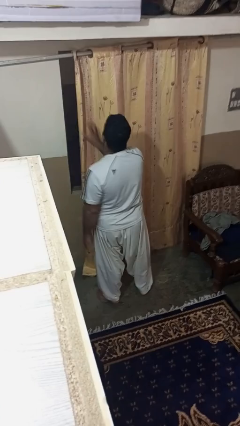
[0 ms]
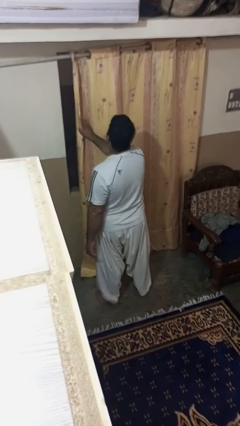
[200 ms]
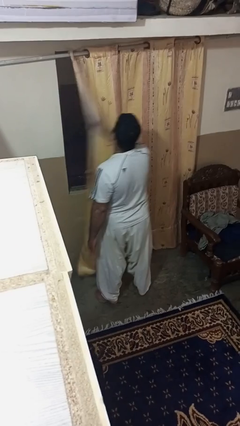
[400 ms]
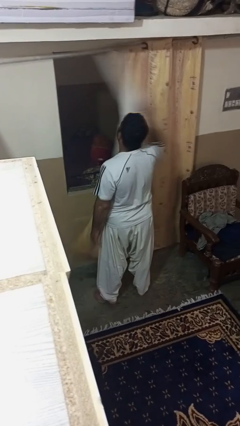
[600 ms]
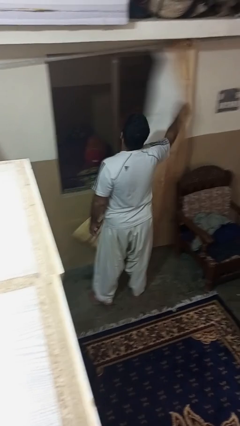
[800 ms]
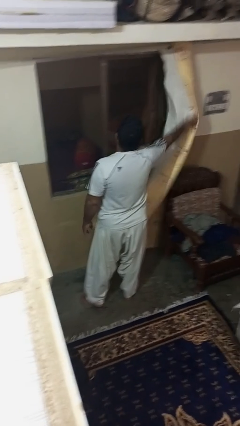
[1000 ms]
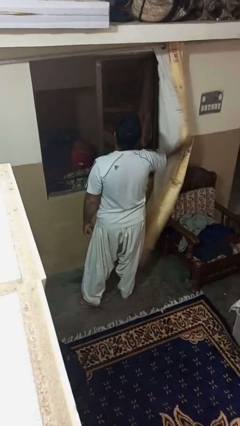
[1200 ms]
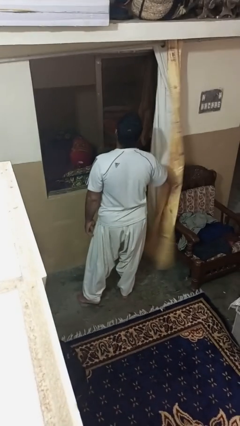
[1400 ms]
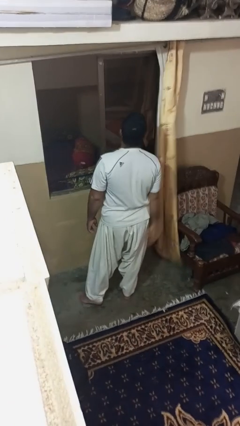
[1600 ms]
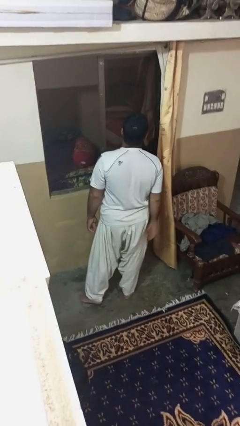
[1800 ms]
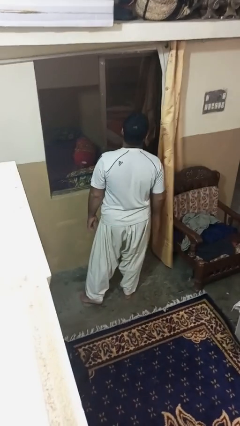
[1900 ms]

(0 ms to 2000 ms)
person opens curtains

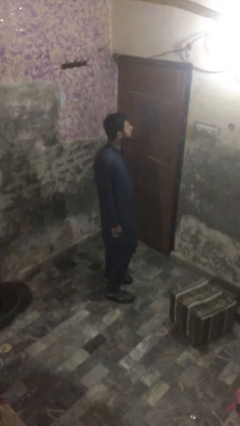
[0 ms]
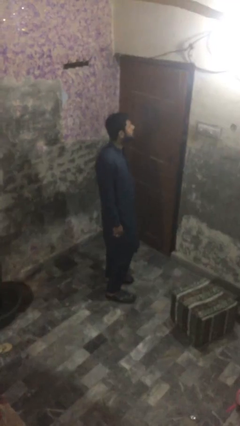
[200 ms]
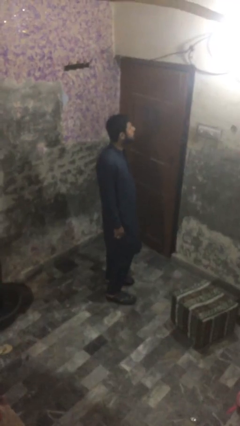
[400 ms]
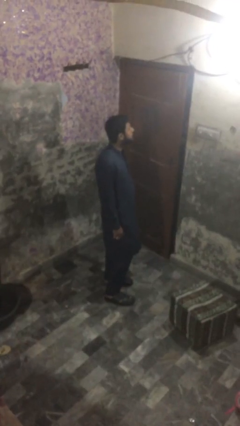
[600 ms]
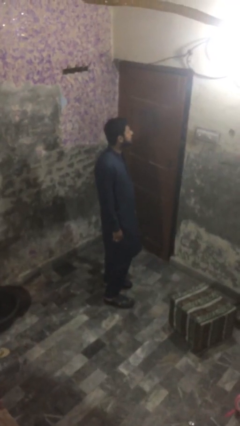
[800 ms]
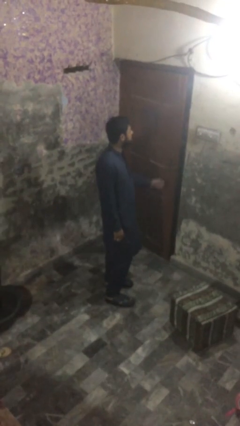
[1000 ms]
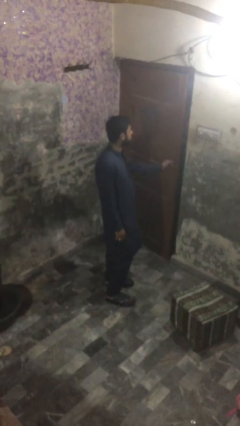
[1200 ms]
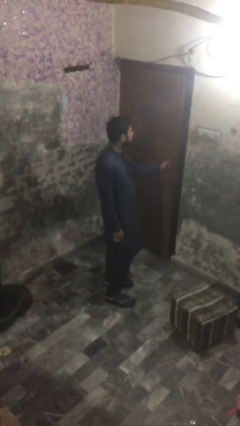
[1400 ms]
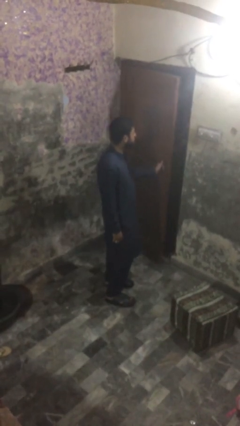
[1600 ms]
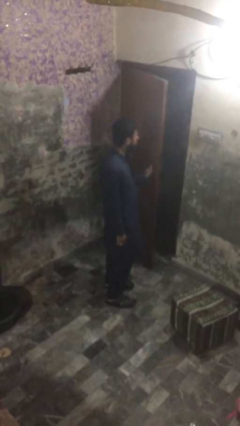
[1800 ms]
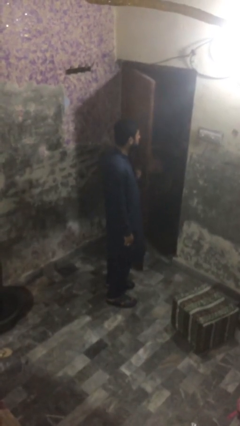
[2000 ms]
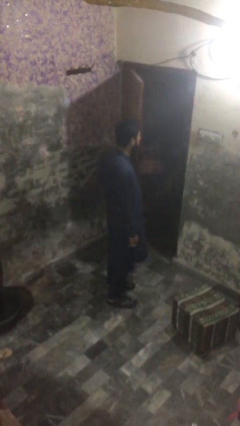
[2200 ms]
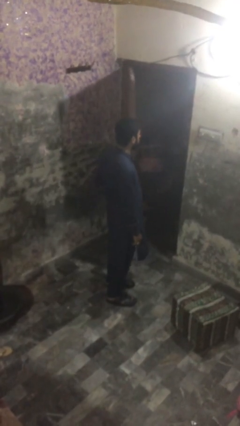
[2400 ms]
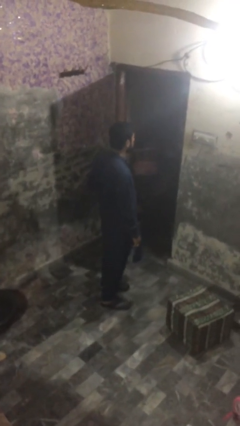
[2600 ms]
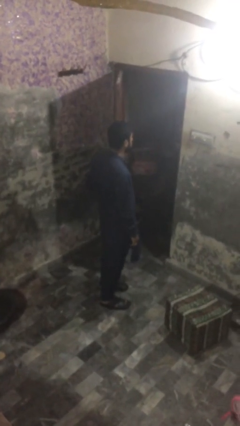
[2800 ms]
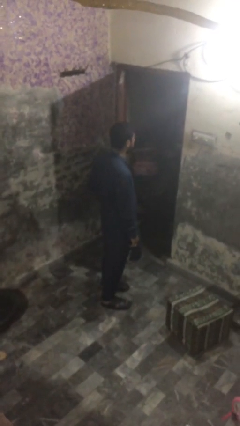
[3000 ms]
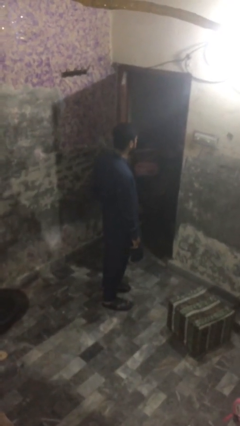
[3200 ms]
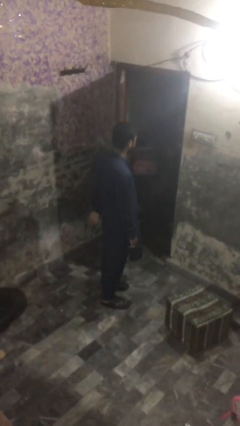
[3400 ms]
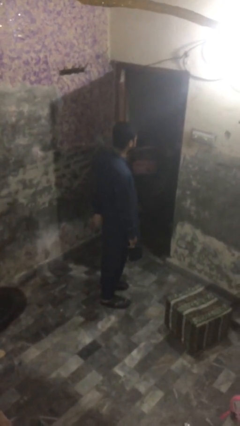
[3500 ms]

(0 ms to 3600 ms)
person opens facility door

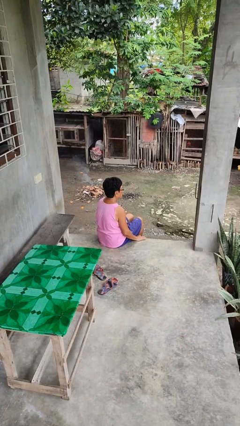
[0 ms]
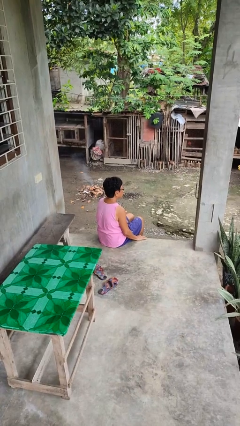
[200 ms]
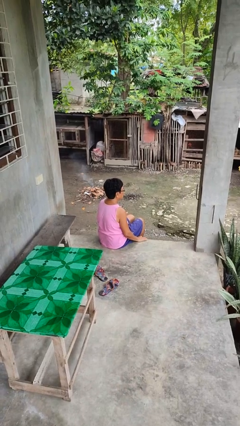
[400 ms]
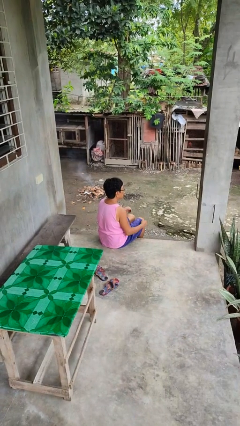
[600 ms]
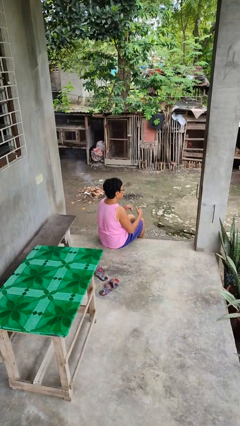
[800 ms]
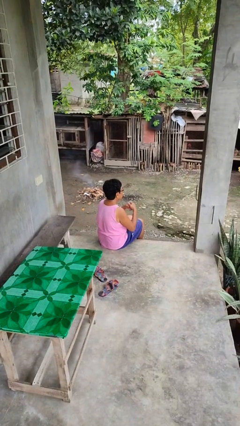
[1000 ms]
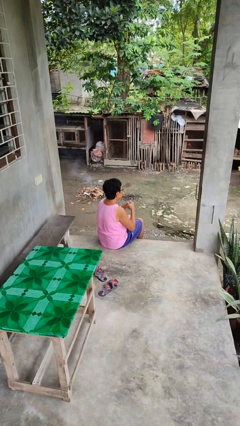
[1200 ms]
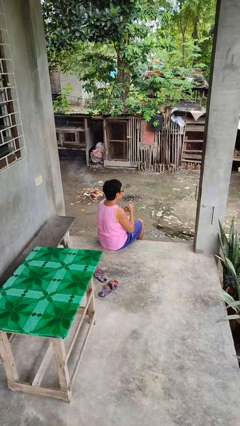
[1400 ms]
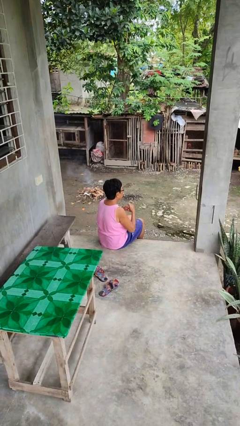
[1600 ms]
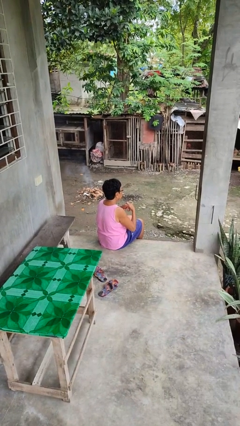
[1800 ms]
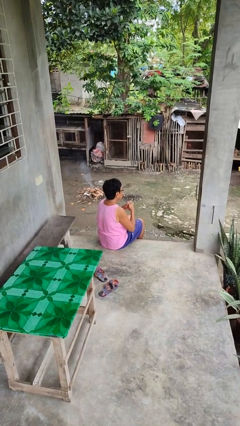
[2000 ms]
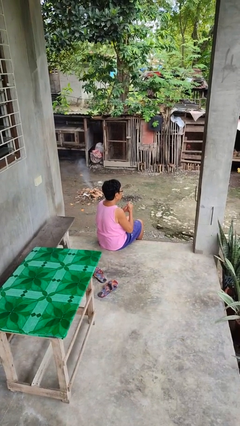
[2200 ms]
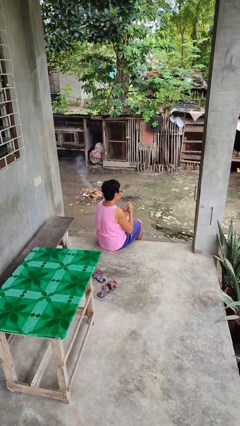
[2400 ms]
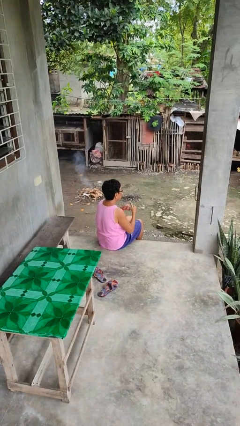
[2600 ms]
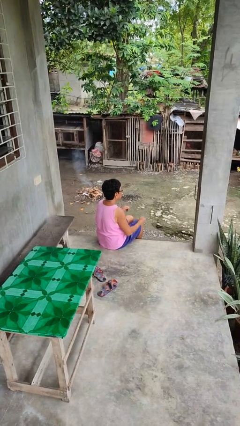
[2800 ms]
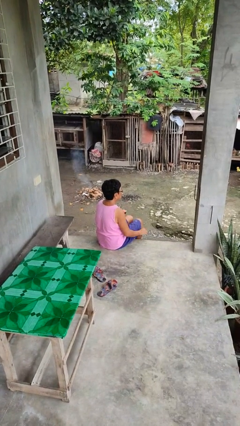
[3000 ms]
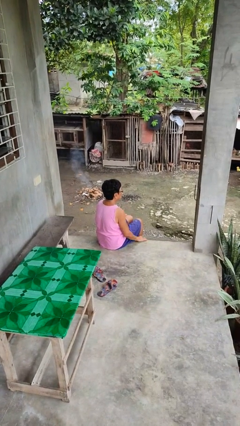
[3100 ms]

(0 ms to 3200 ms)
person cracks knuckles

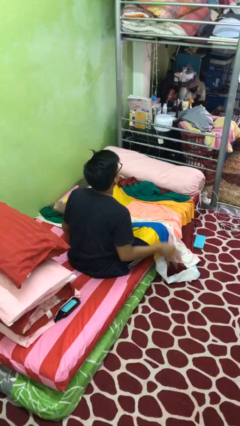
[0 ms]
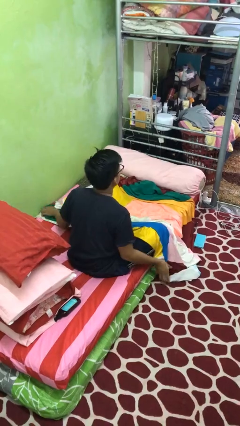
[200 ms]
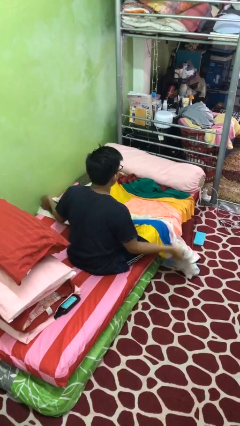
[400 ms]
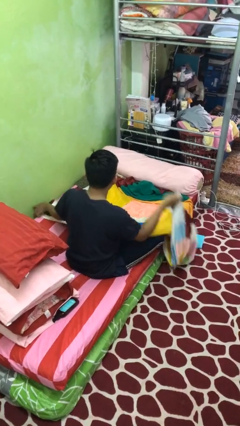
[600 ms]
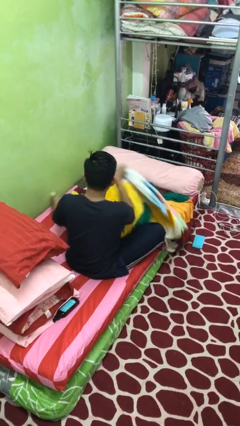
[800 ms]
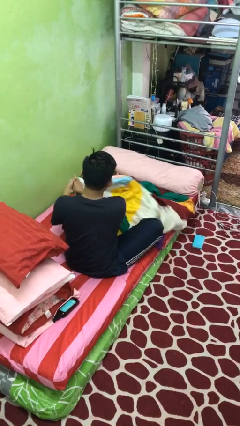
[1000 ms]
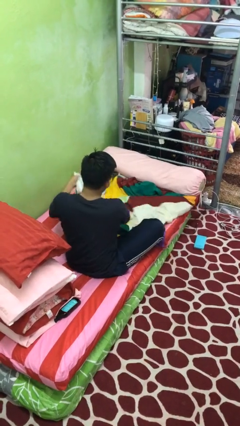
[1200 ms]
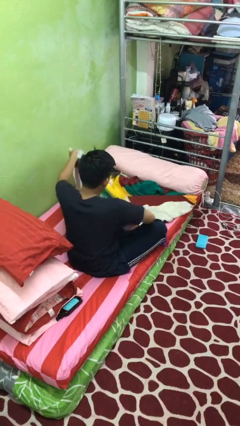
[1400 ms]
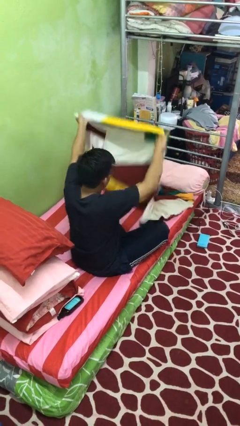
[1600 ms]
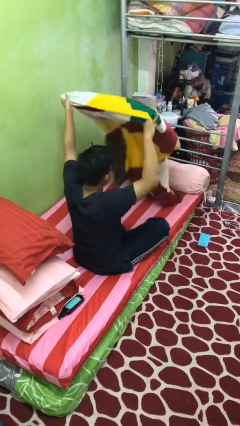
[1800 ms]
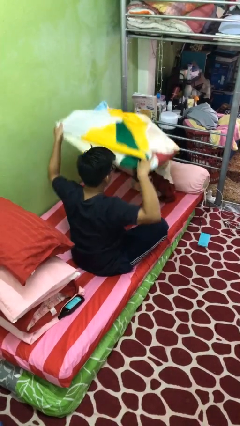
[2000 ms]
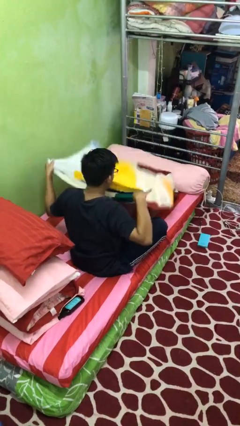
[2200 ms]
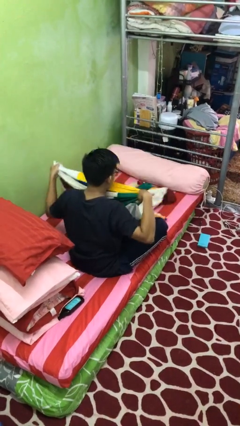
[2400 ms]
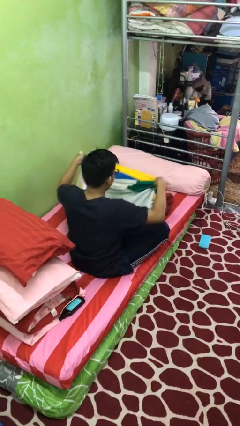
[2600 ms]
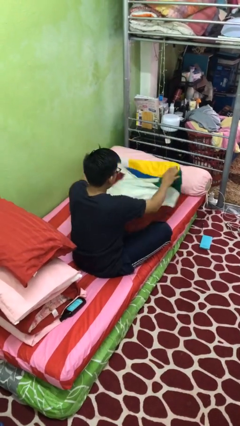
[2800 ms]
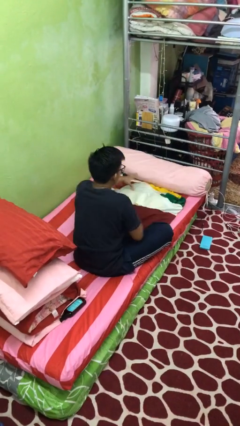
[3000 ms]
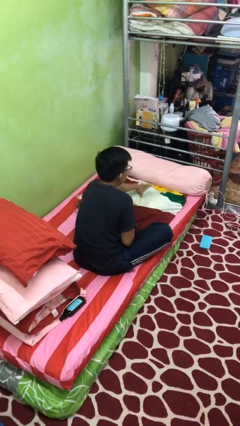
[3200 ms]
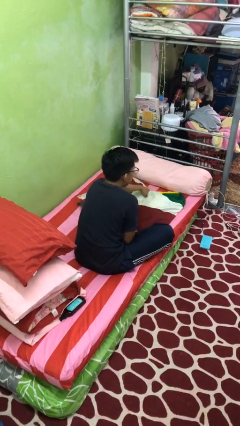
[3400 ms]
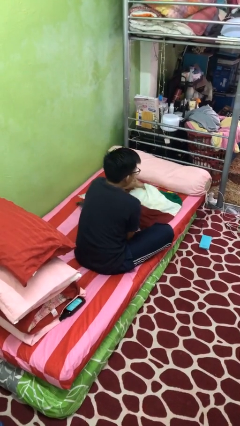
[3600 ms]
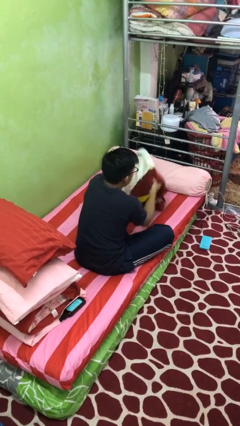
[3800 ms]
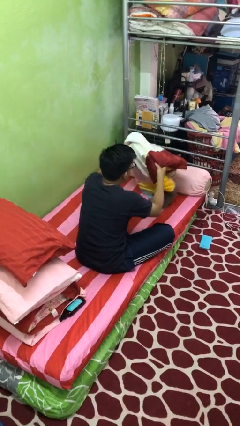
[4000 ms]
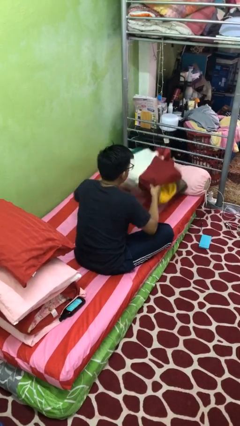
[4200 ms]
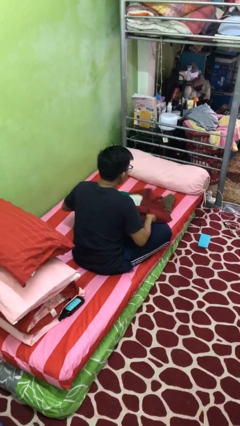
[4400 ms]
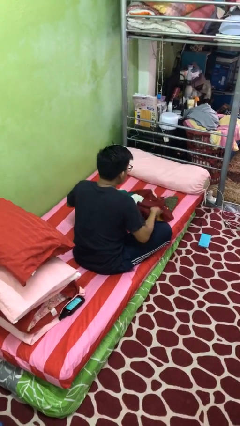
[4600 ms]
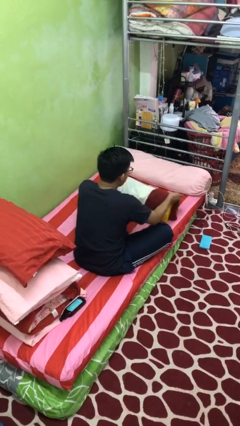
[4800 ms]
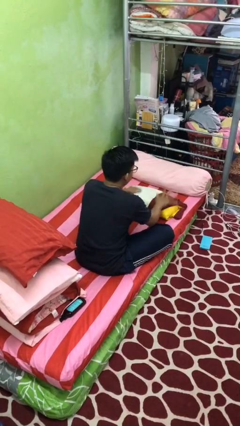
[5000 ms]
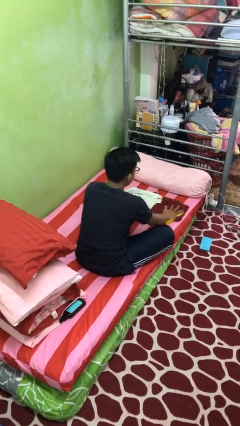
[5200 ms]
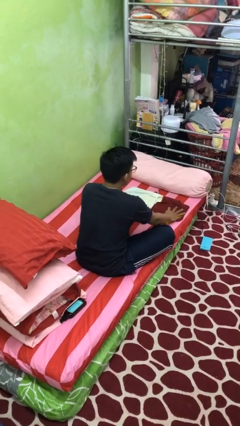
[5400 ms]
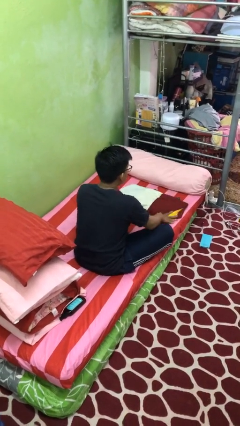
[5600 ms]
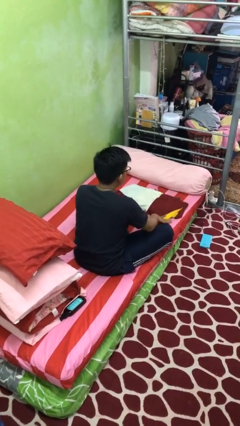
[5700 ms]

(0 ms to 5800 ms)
person folds blanket

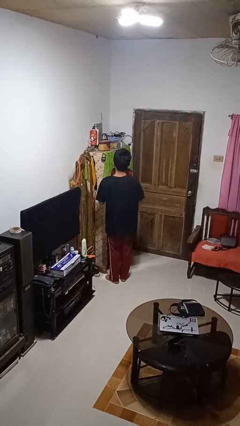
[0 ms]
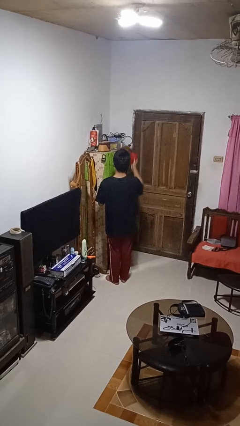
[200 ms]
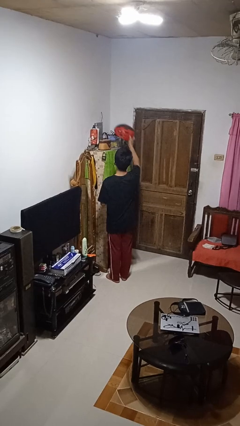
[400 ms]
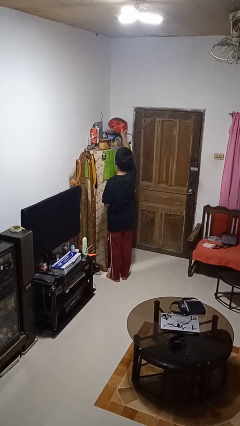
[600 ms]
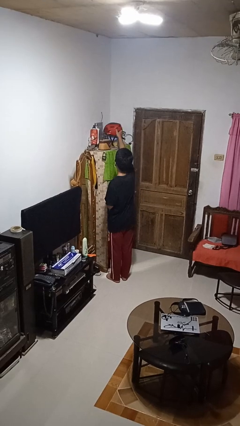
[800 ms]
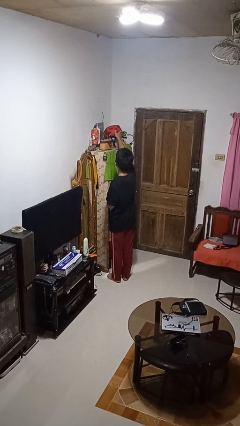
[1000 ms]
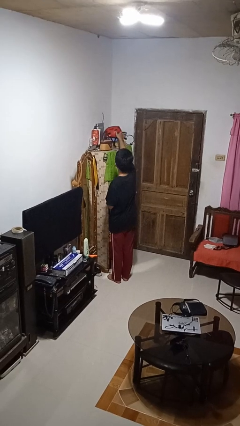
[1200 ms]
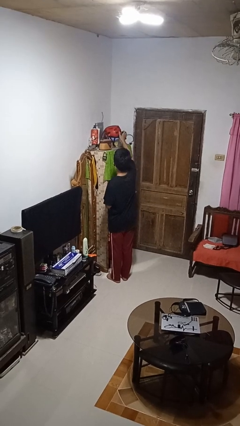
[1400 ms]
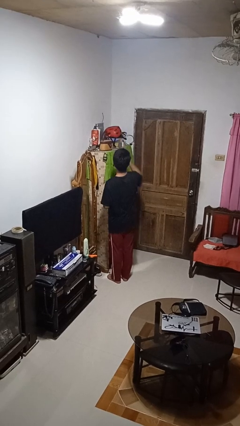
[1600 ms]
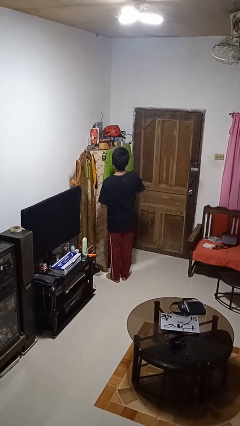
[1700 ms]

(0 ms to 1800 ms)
person puts down object on shelf

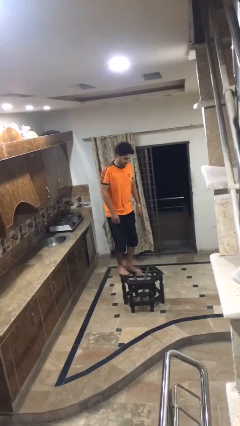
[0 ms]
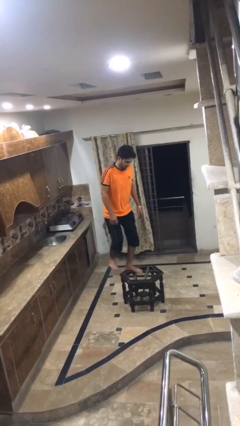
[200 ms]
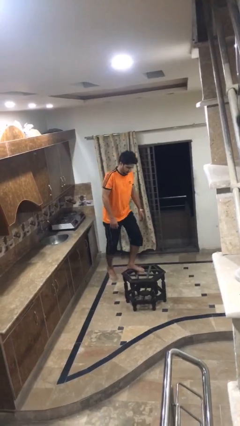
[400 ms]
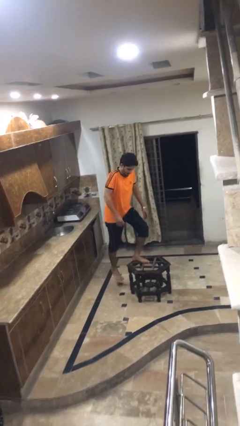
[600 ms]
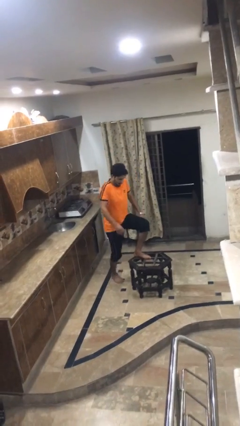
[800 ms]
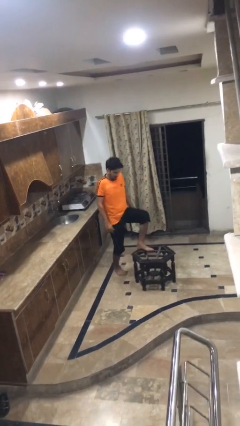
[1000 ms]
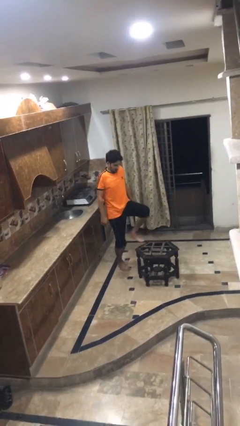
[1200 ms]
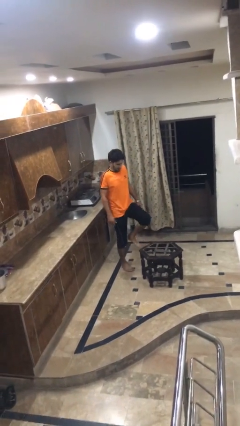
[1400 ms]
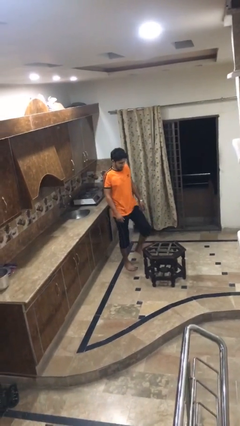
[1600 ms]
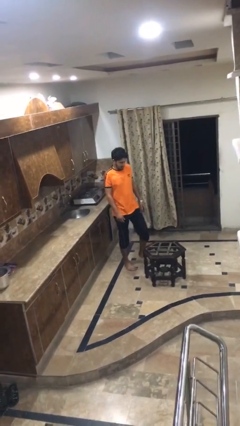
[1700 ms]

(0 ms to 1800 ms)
person climbs off table
